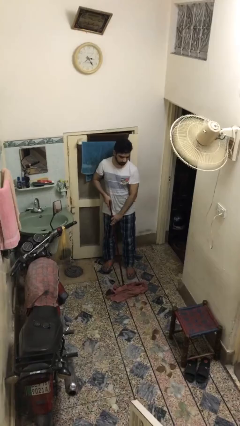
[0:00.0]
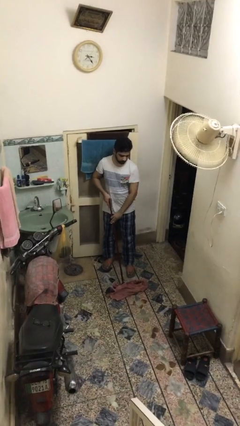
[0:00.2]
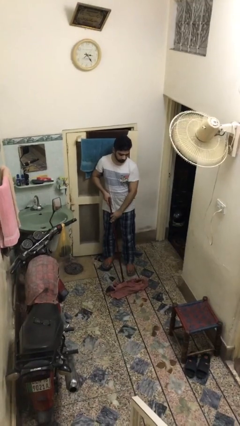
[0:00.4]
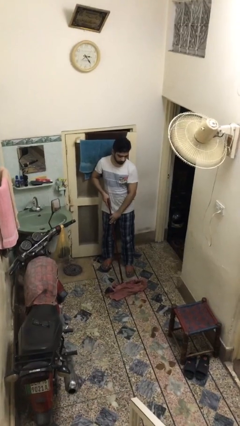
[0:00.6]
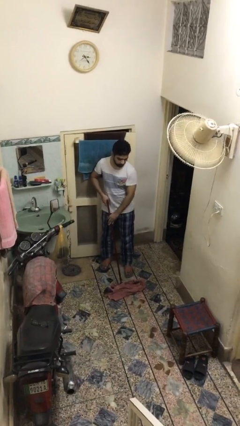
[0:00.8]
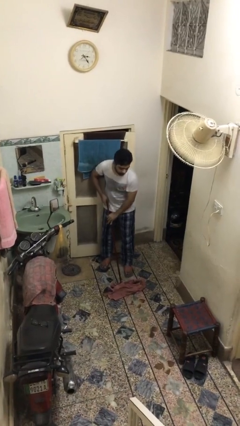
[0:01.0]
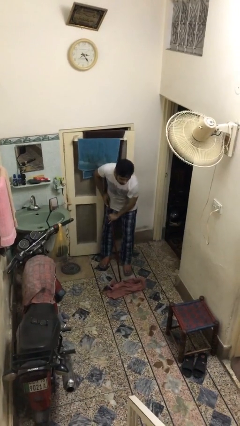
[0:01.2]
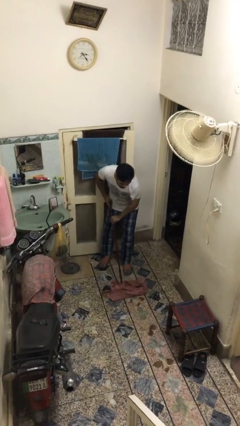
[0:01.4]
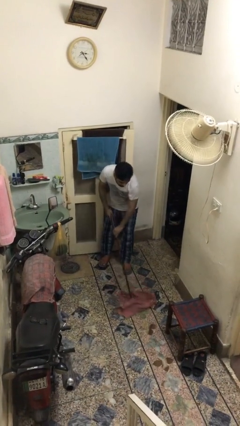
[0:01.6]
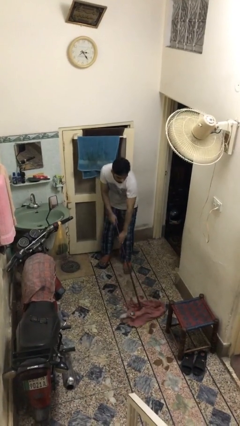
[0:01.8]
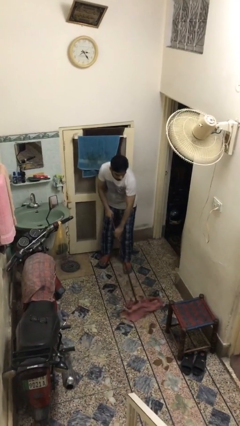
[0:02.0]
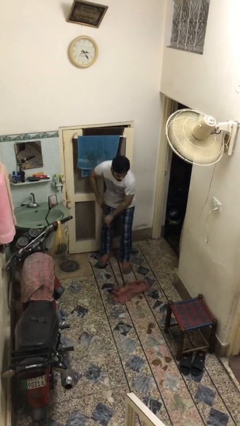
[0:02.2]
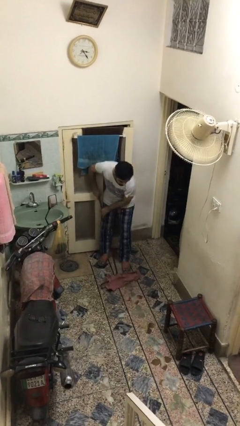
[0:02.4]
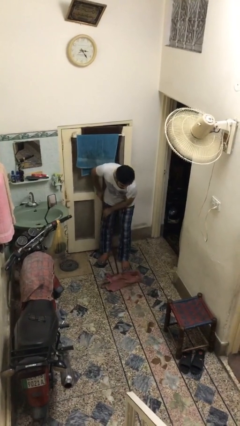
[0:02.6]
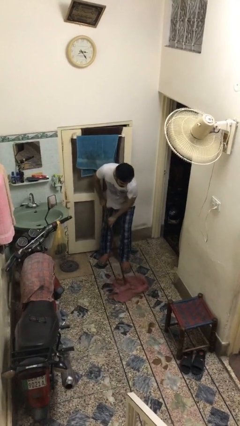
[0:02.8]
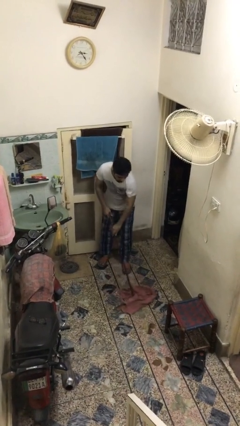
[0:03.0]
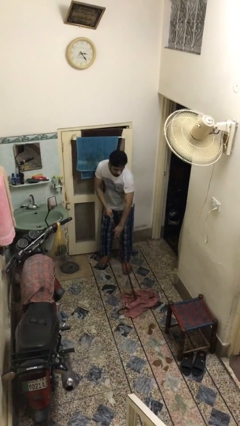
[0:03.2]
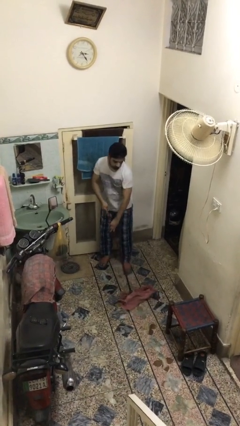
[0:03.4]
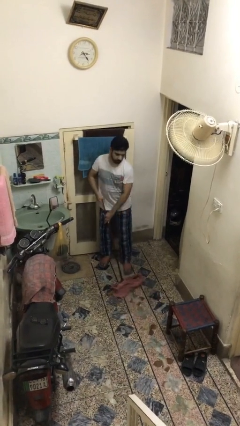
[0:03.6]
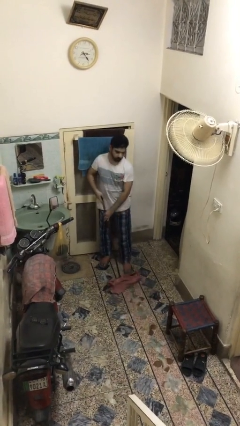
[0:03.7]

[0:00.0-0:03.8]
person mops

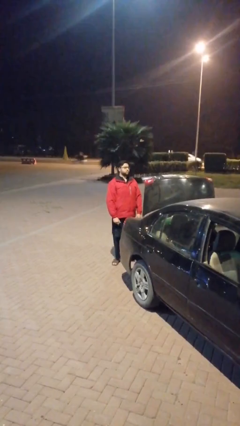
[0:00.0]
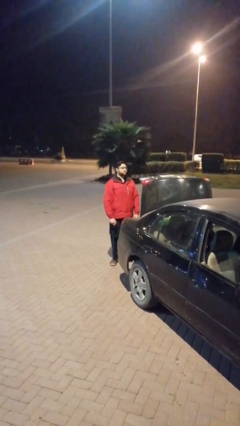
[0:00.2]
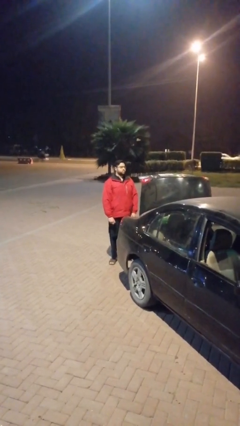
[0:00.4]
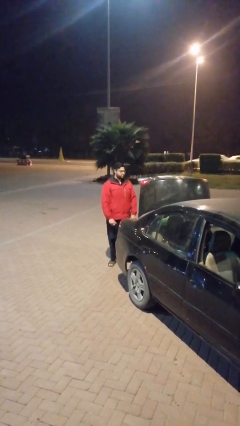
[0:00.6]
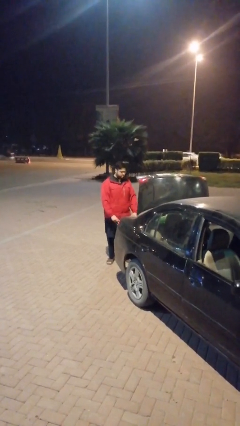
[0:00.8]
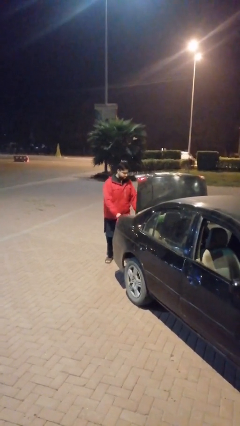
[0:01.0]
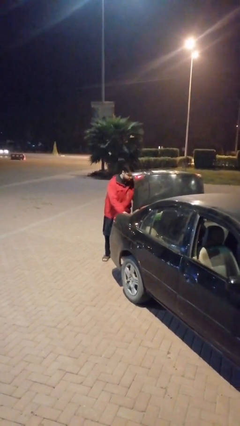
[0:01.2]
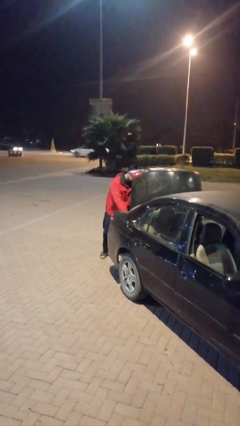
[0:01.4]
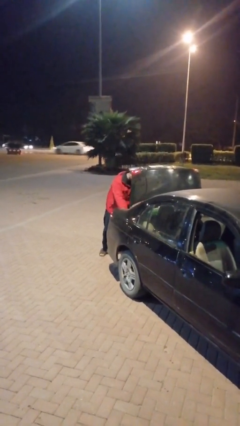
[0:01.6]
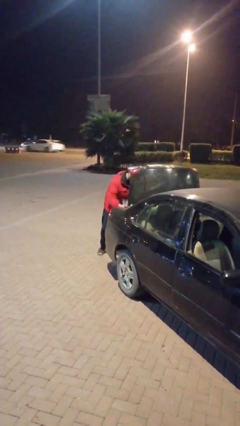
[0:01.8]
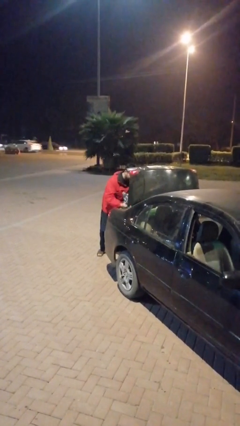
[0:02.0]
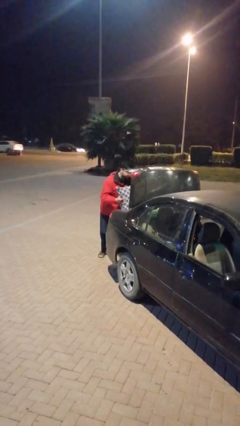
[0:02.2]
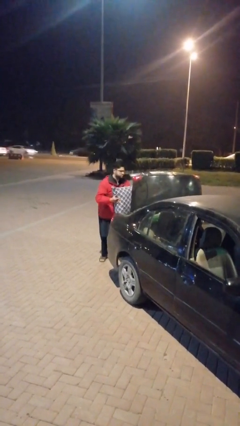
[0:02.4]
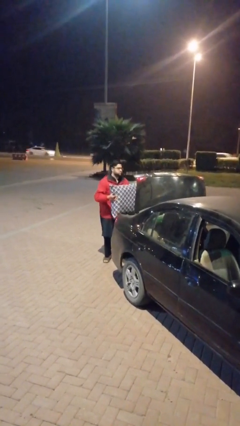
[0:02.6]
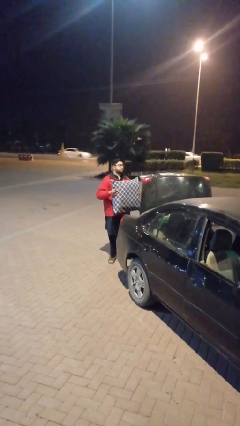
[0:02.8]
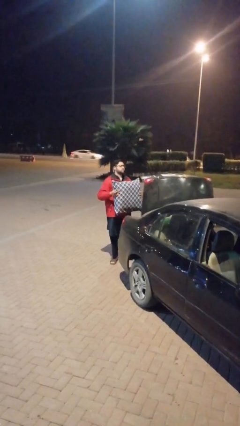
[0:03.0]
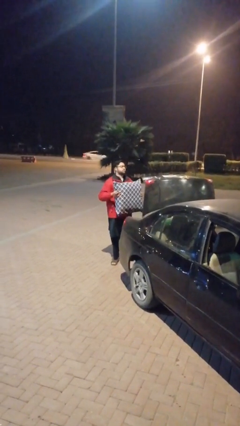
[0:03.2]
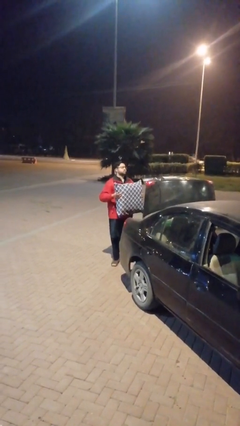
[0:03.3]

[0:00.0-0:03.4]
person unloads car

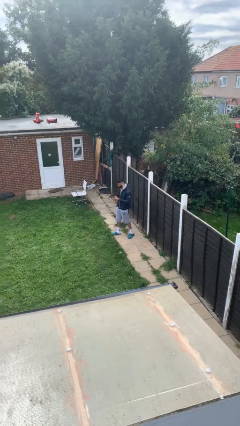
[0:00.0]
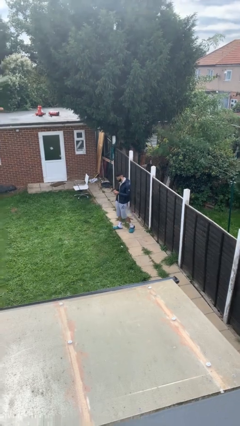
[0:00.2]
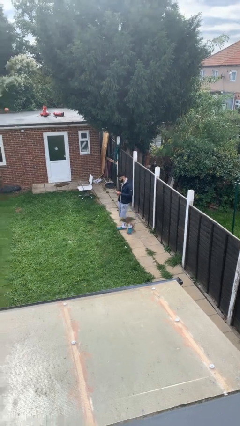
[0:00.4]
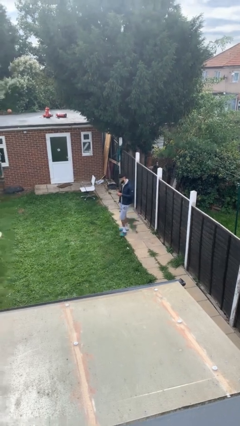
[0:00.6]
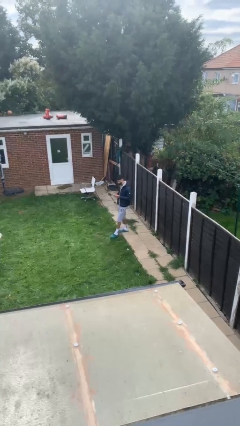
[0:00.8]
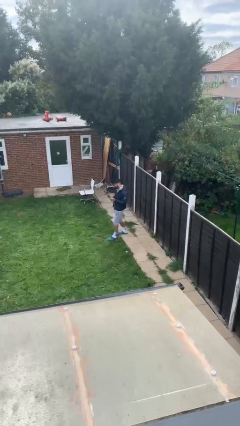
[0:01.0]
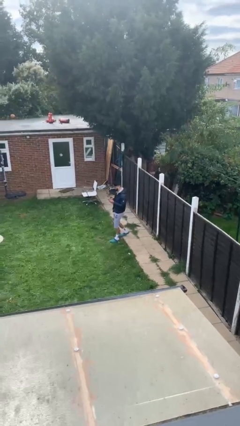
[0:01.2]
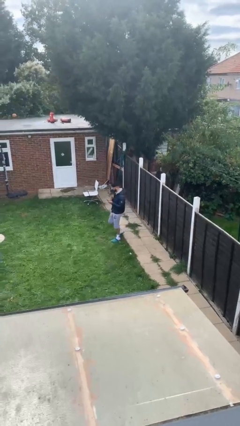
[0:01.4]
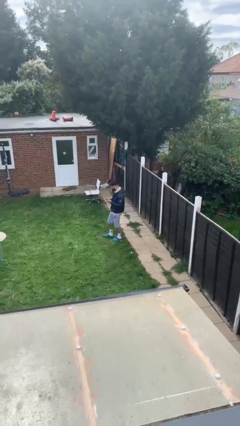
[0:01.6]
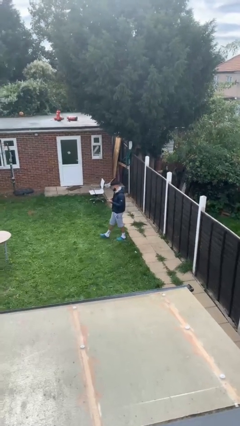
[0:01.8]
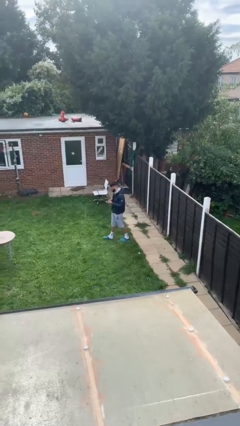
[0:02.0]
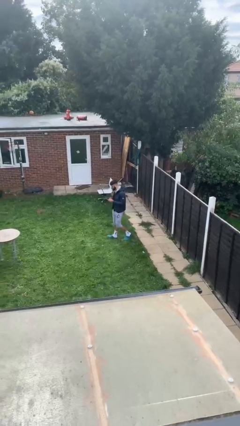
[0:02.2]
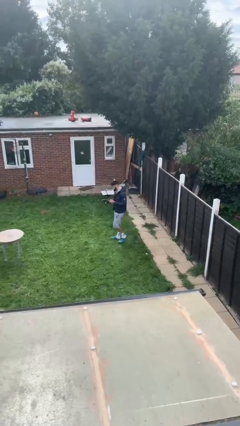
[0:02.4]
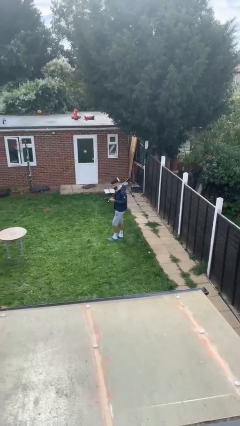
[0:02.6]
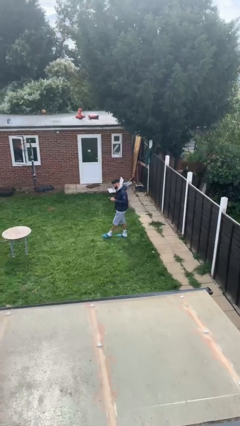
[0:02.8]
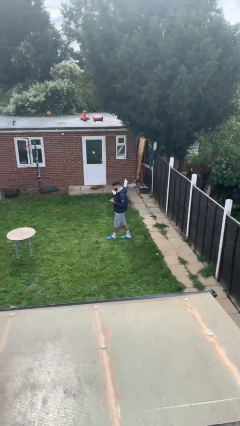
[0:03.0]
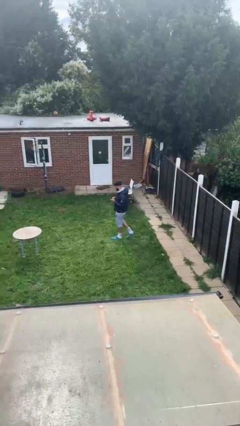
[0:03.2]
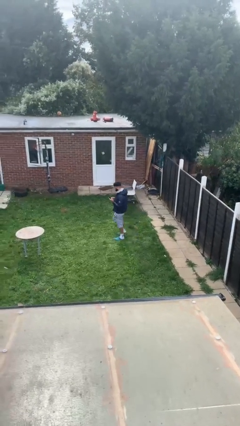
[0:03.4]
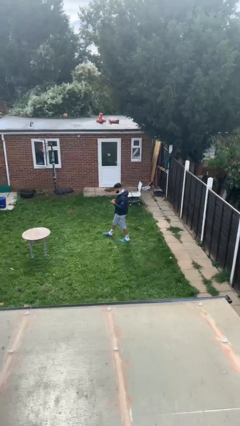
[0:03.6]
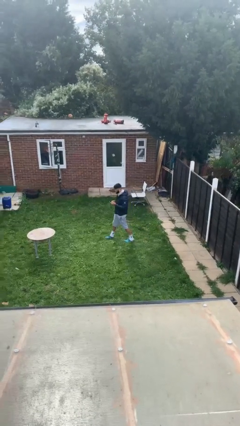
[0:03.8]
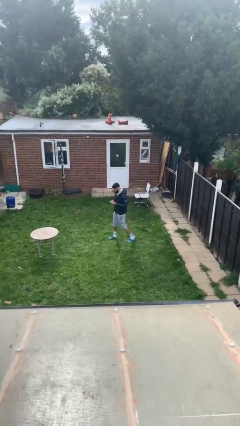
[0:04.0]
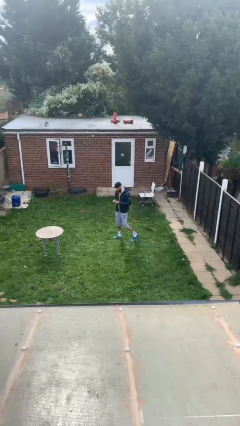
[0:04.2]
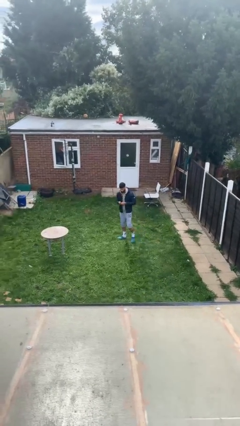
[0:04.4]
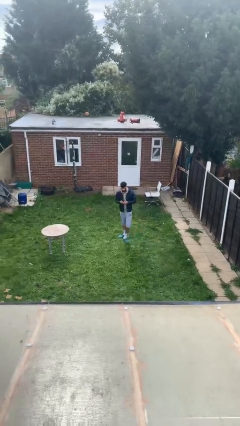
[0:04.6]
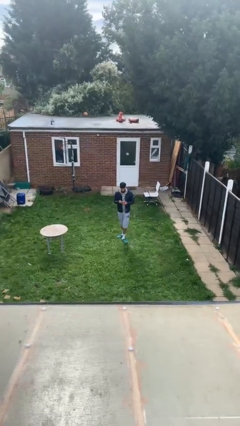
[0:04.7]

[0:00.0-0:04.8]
person texts on phone

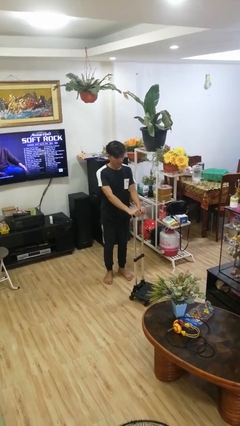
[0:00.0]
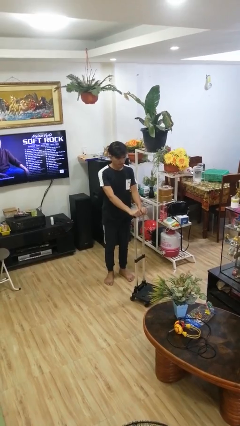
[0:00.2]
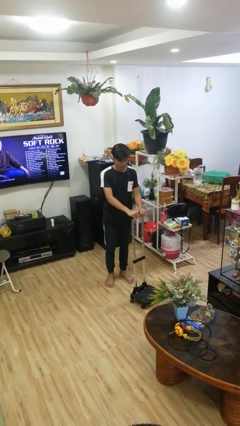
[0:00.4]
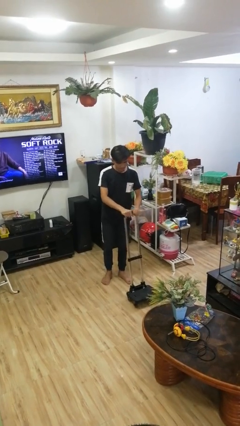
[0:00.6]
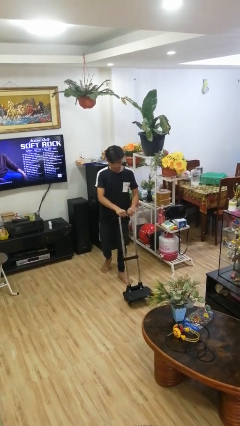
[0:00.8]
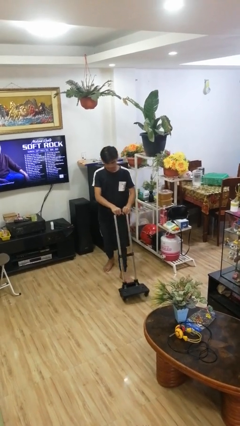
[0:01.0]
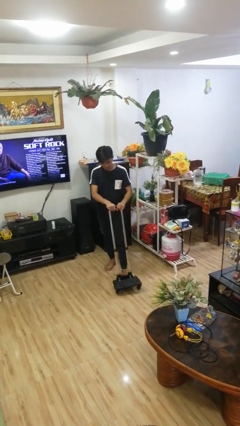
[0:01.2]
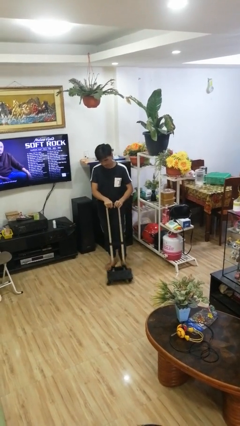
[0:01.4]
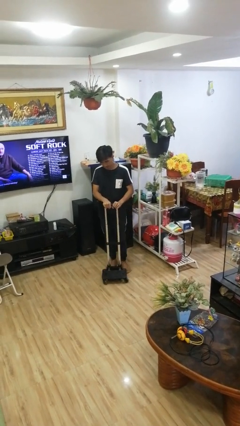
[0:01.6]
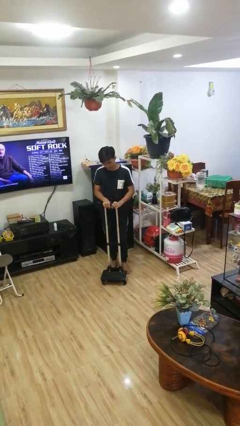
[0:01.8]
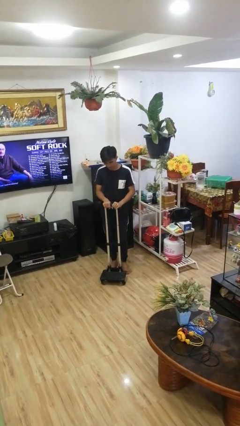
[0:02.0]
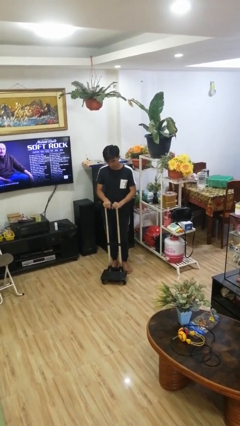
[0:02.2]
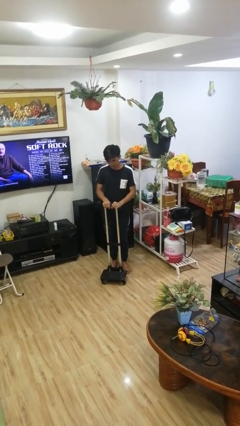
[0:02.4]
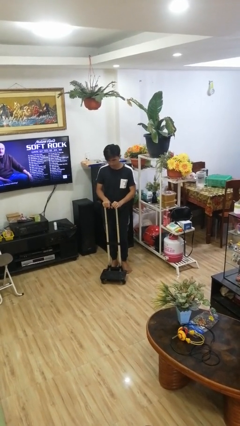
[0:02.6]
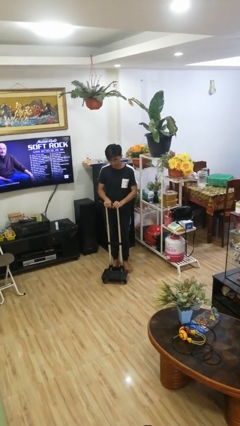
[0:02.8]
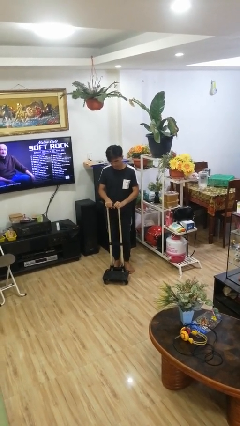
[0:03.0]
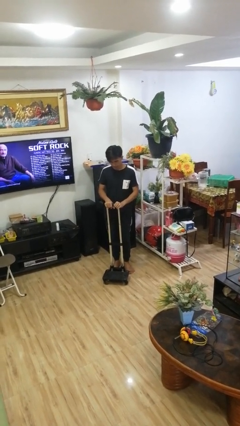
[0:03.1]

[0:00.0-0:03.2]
person pulls wheeled cart

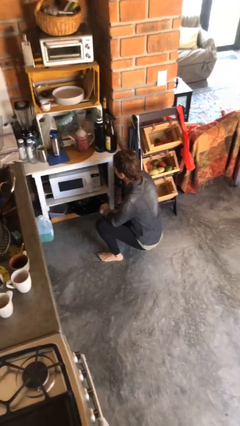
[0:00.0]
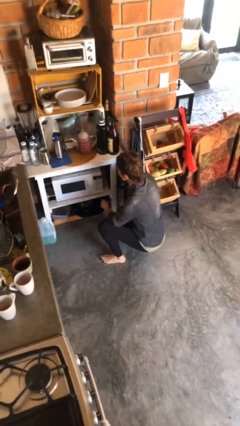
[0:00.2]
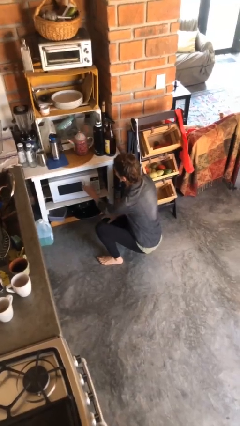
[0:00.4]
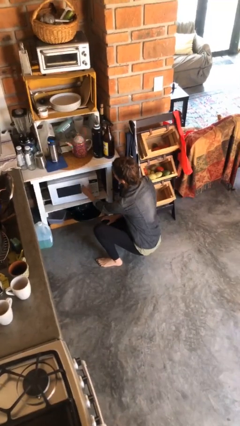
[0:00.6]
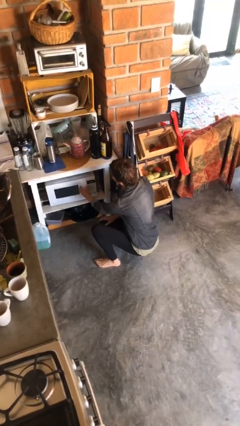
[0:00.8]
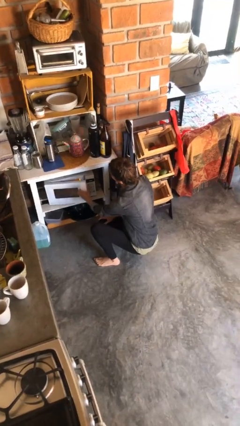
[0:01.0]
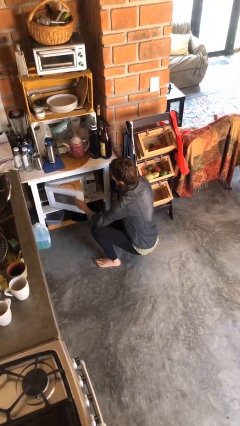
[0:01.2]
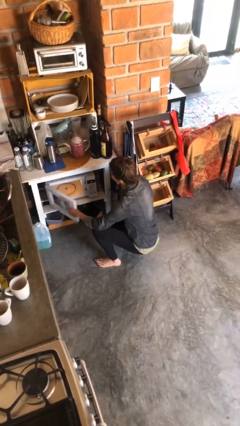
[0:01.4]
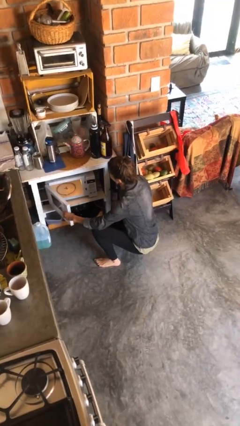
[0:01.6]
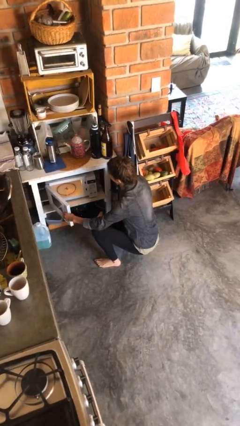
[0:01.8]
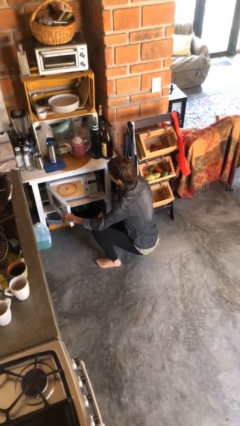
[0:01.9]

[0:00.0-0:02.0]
person opens microwave
